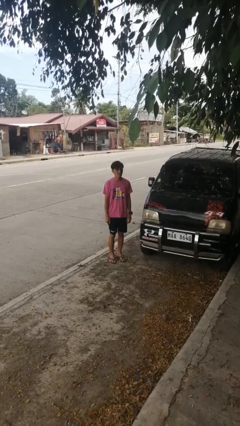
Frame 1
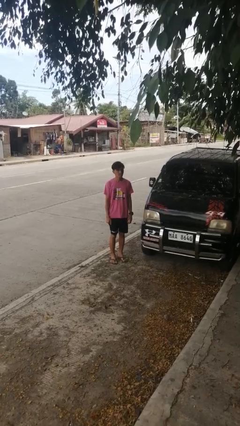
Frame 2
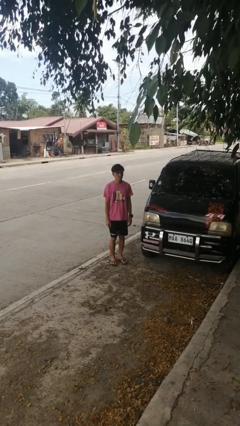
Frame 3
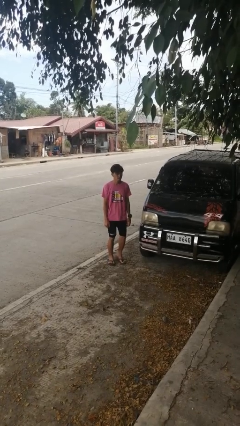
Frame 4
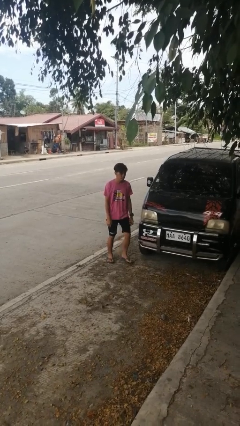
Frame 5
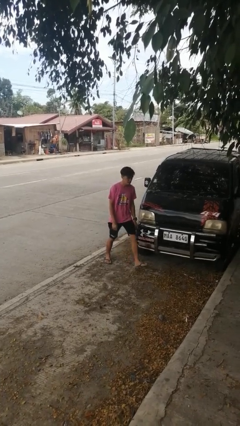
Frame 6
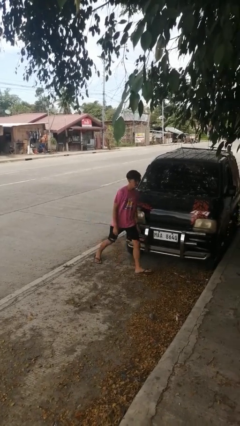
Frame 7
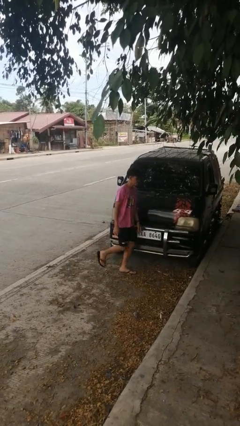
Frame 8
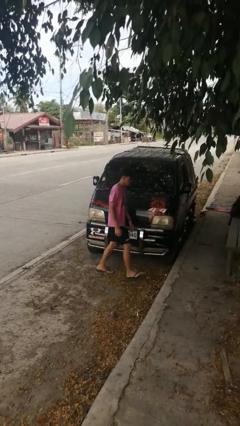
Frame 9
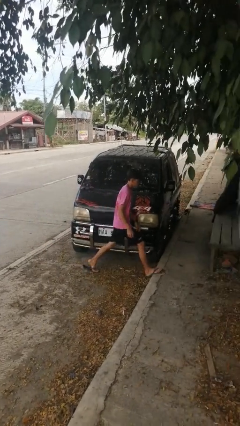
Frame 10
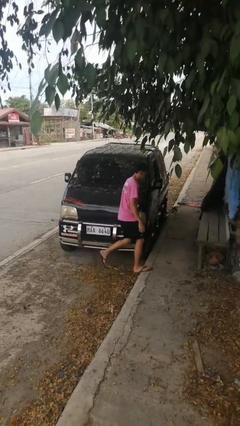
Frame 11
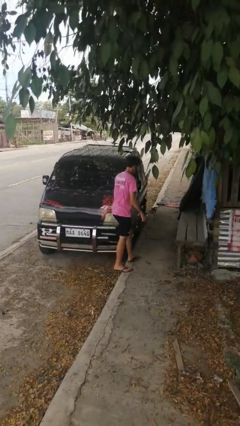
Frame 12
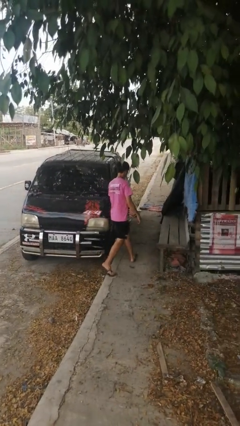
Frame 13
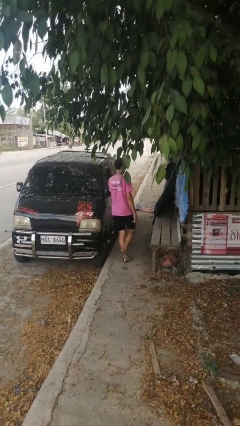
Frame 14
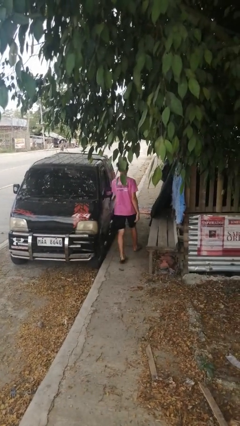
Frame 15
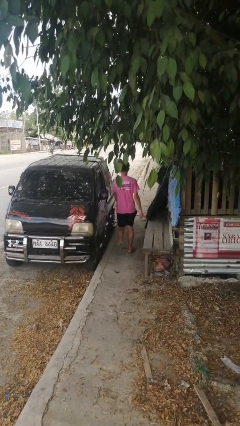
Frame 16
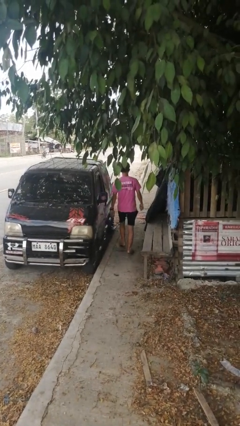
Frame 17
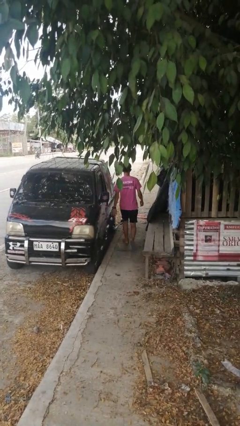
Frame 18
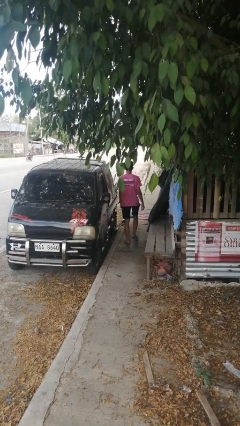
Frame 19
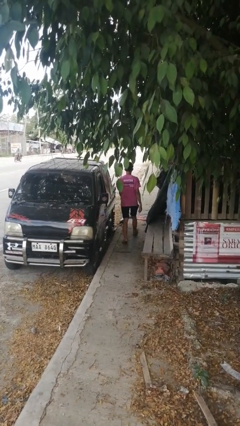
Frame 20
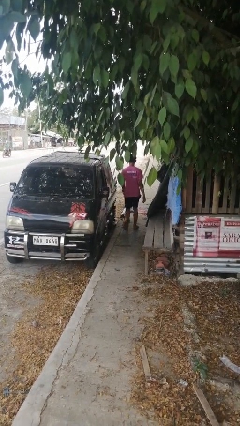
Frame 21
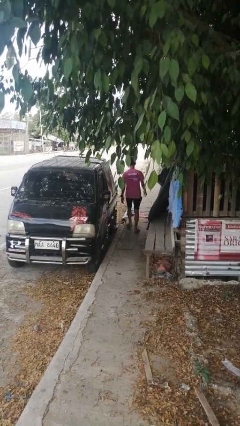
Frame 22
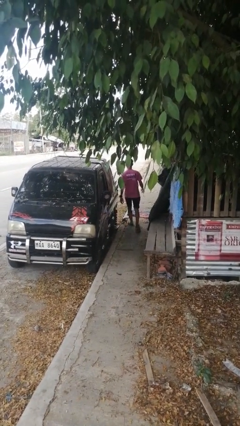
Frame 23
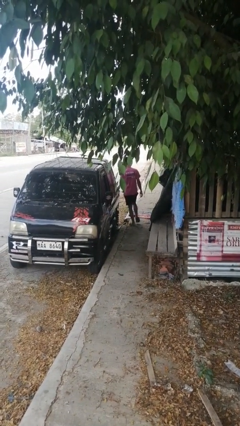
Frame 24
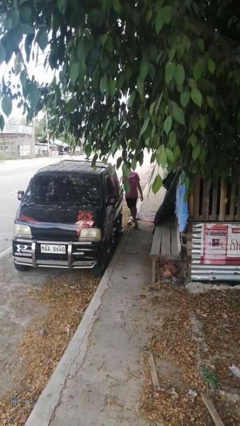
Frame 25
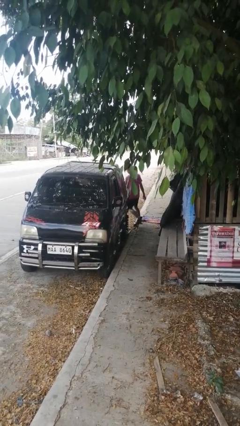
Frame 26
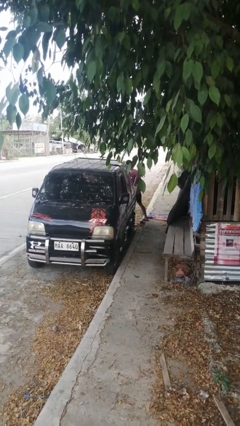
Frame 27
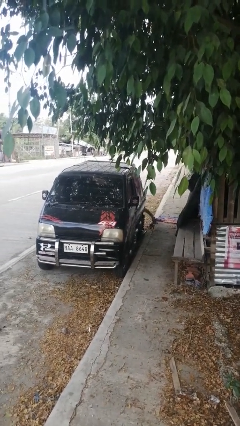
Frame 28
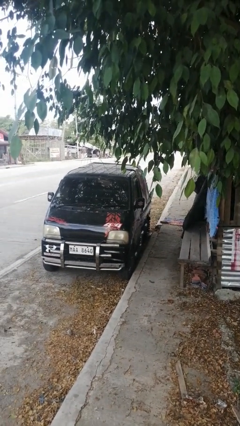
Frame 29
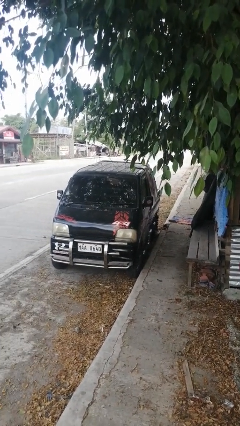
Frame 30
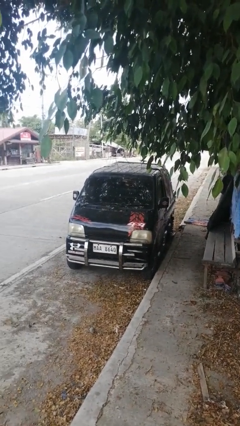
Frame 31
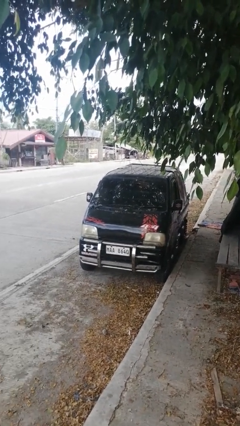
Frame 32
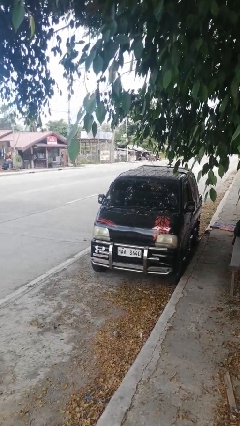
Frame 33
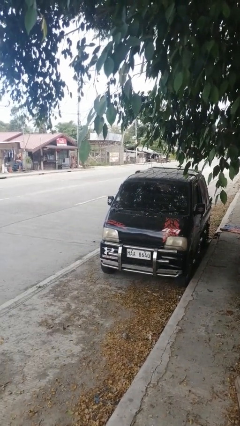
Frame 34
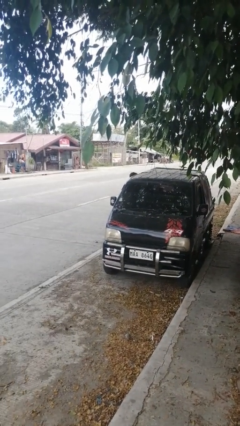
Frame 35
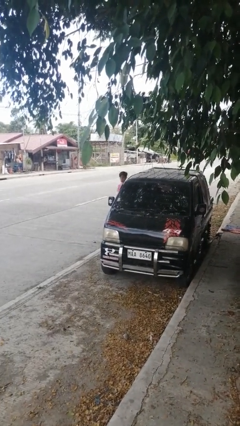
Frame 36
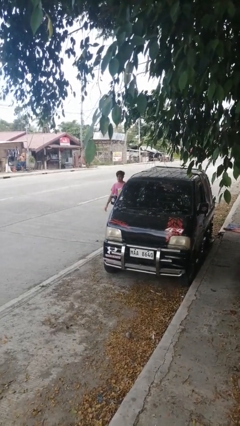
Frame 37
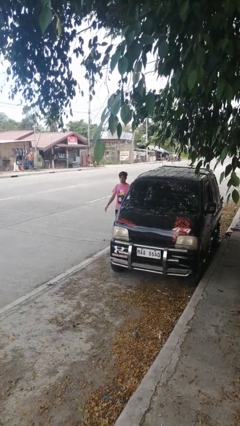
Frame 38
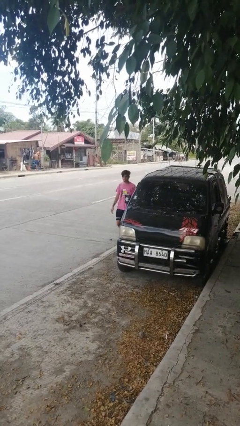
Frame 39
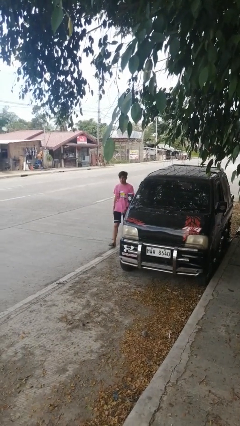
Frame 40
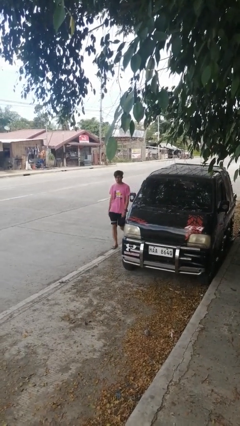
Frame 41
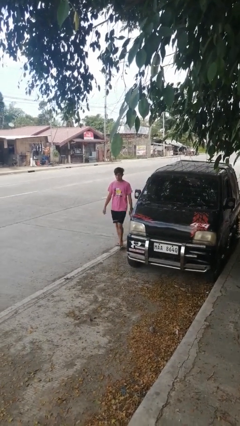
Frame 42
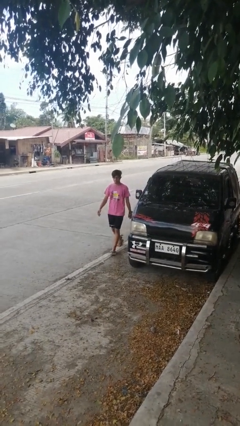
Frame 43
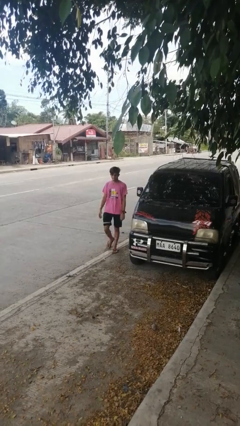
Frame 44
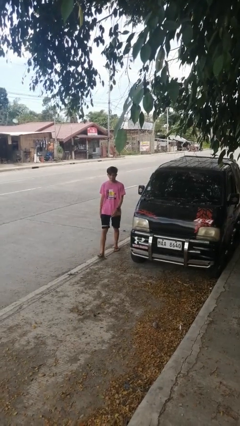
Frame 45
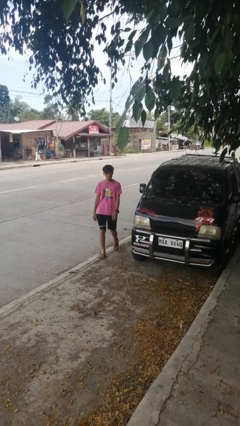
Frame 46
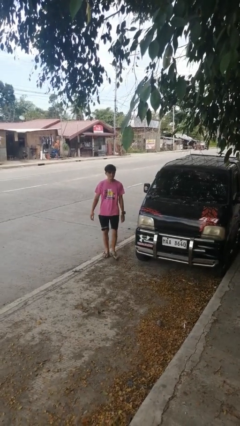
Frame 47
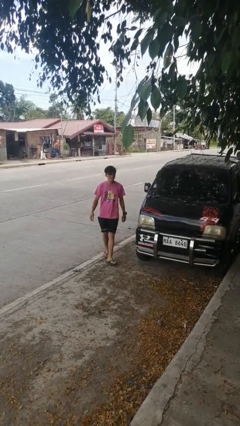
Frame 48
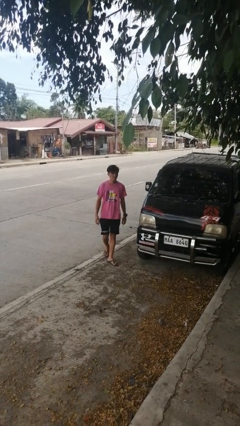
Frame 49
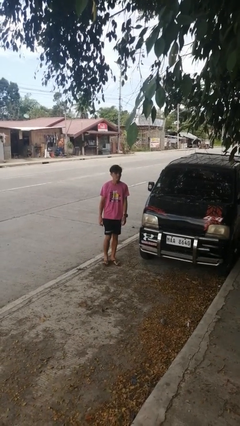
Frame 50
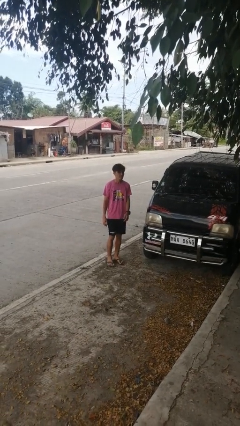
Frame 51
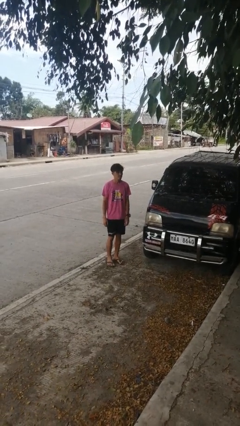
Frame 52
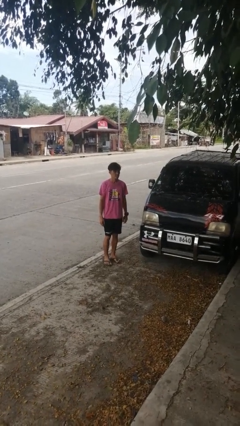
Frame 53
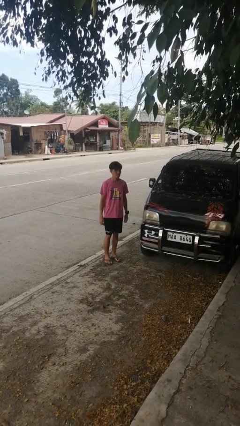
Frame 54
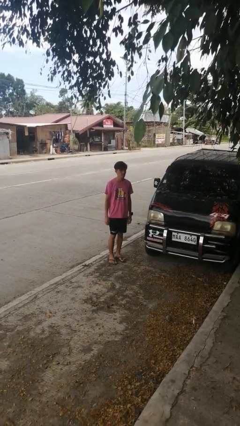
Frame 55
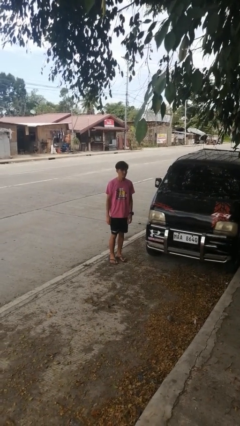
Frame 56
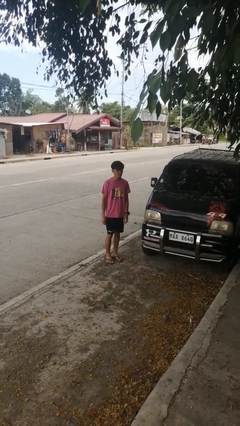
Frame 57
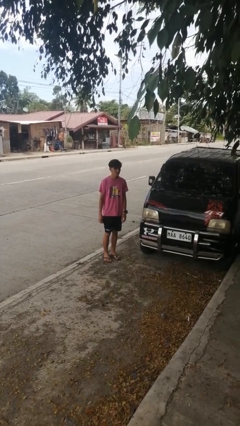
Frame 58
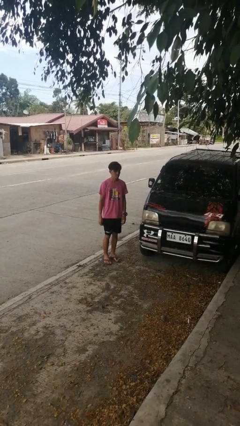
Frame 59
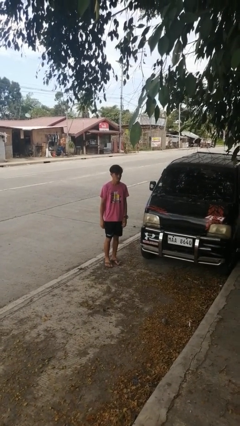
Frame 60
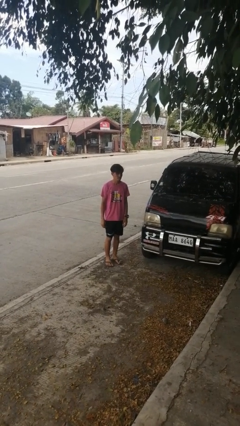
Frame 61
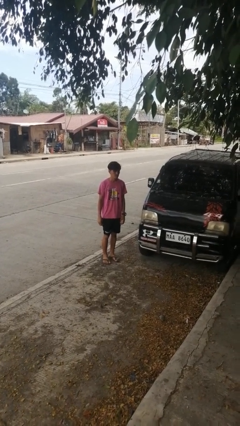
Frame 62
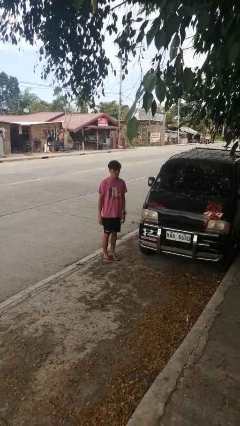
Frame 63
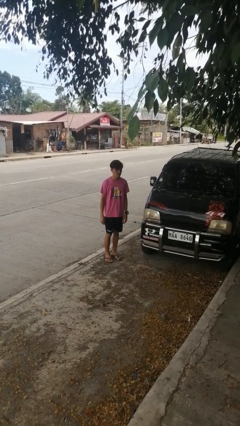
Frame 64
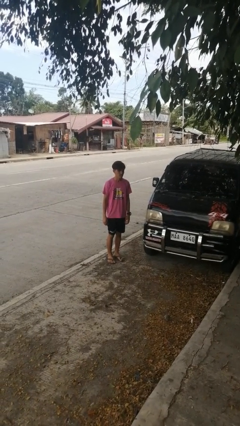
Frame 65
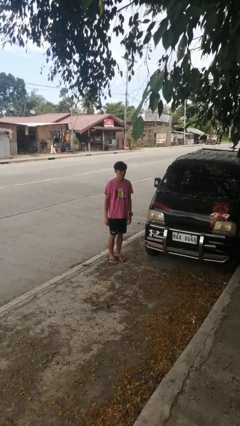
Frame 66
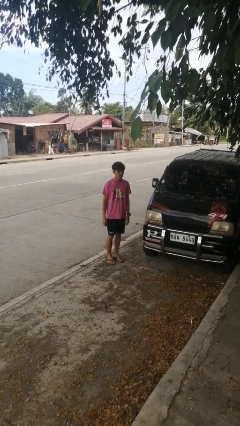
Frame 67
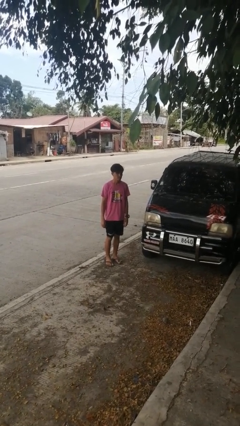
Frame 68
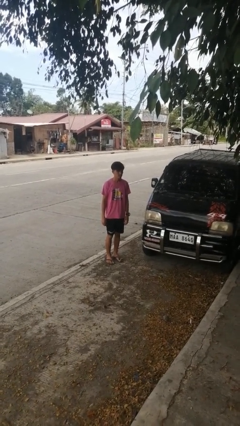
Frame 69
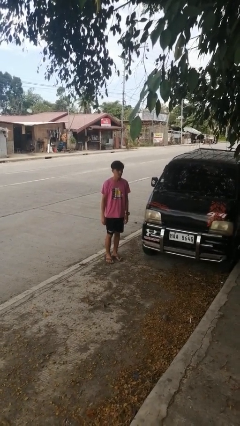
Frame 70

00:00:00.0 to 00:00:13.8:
person walks around car

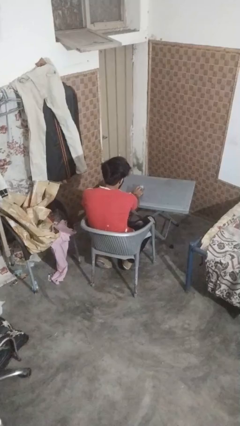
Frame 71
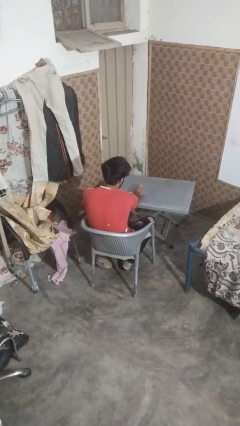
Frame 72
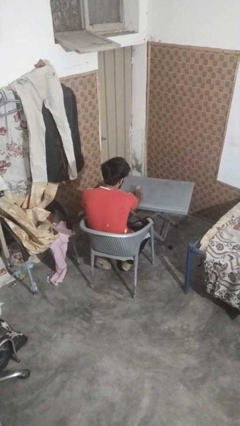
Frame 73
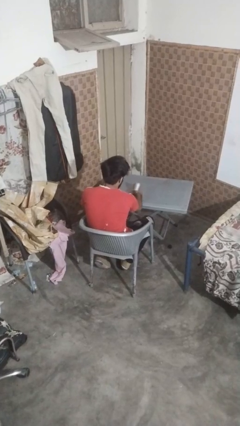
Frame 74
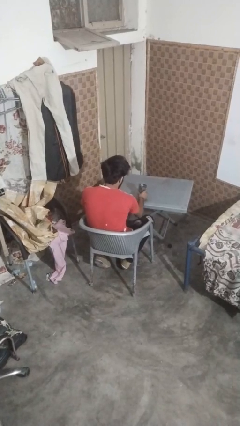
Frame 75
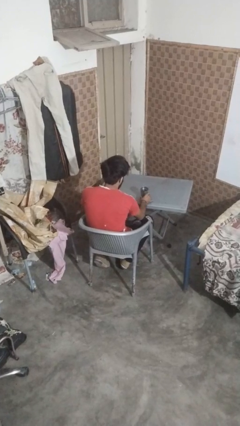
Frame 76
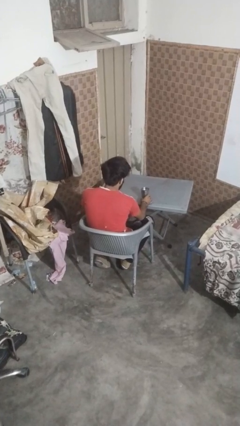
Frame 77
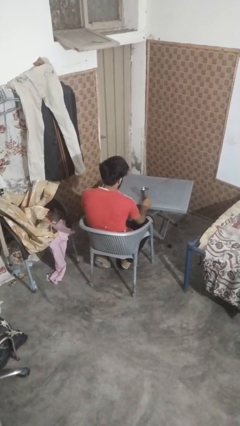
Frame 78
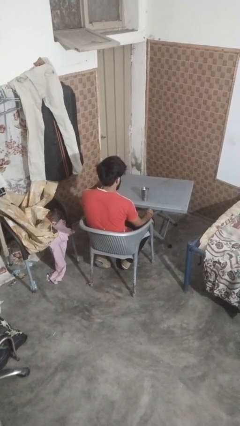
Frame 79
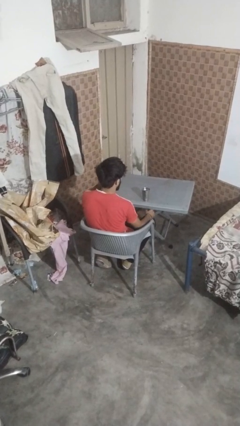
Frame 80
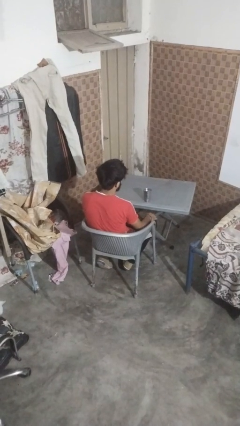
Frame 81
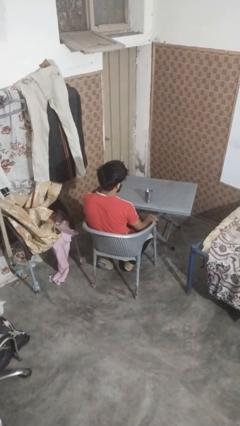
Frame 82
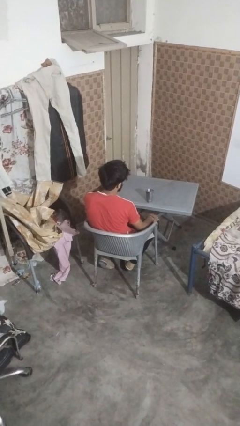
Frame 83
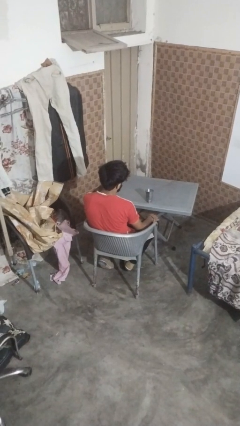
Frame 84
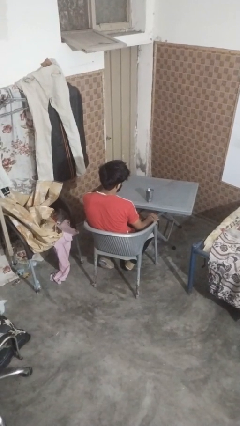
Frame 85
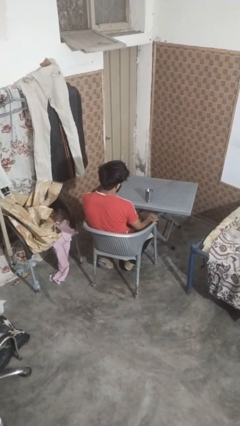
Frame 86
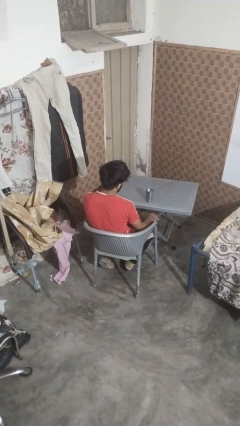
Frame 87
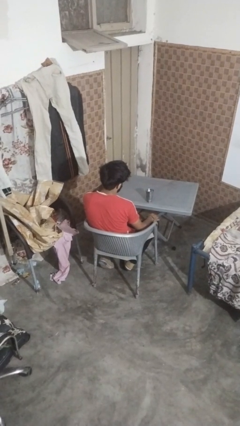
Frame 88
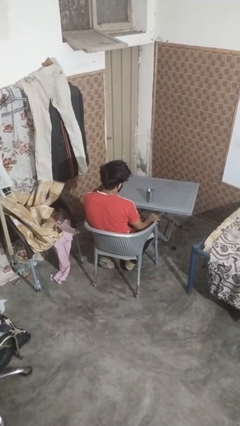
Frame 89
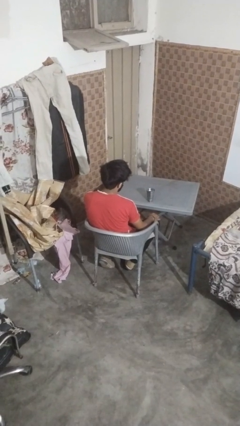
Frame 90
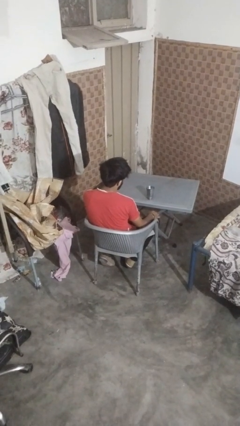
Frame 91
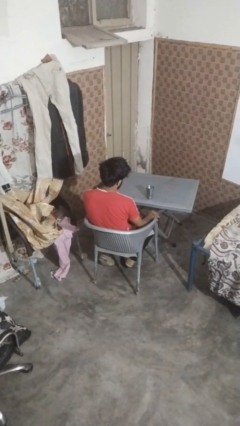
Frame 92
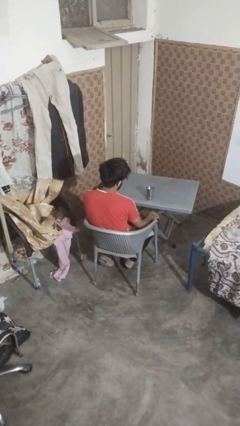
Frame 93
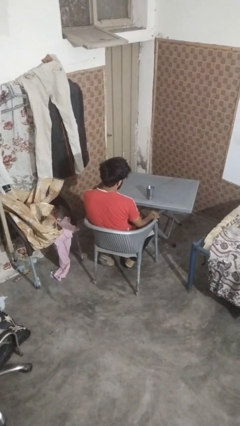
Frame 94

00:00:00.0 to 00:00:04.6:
person sets upright glass
